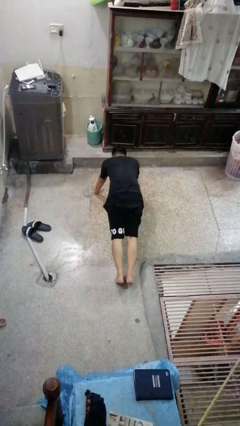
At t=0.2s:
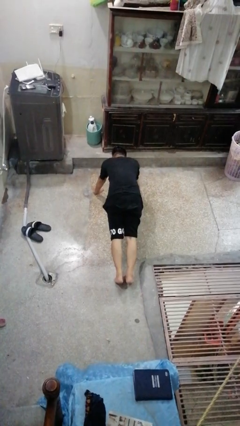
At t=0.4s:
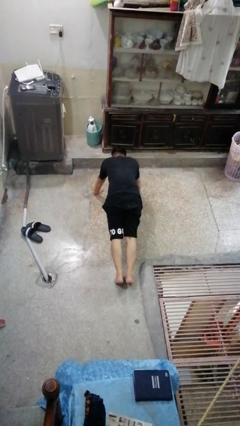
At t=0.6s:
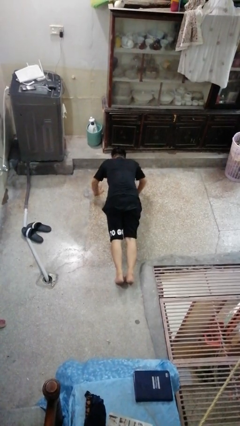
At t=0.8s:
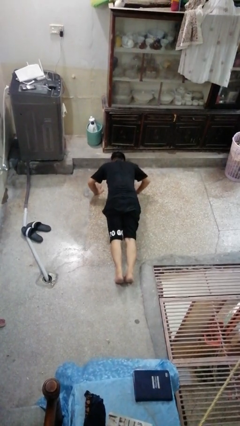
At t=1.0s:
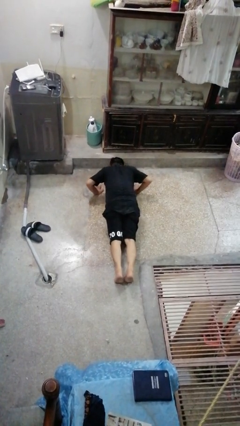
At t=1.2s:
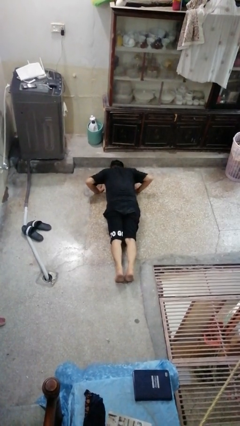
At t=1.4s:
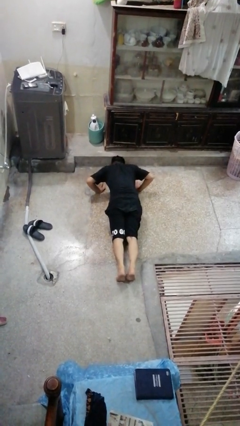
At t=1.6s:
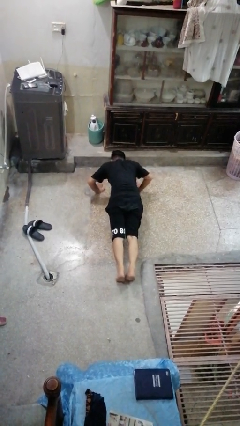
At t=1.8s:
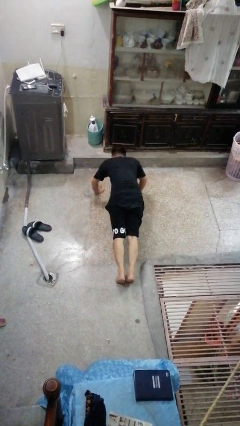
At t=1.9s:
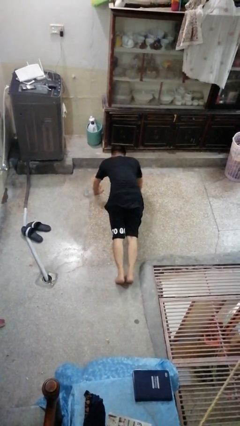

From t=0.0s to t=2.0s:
person exercises with pushup

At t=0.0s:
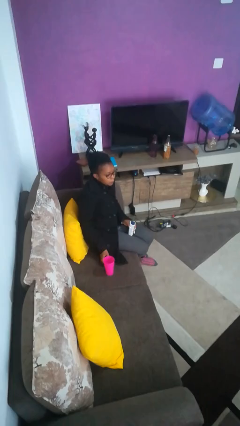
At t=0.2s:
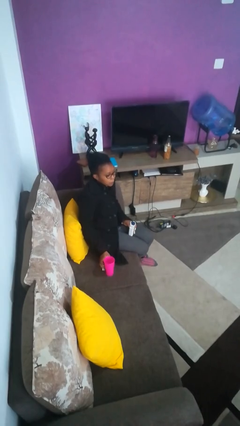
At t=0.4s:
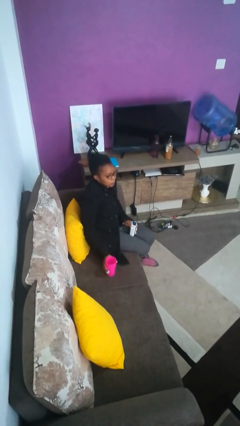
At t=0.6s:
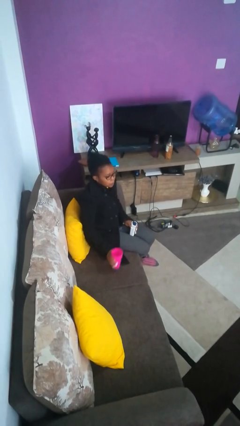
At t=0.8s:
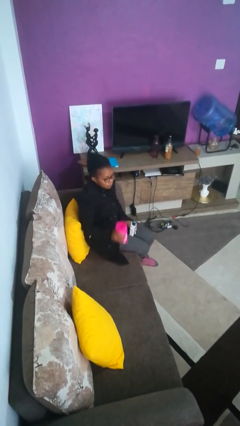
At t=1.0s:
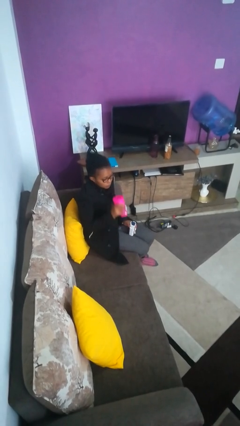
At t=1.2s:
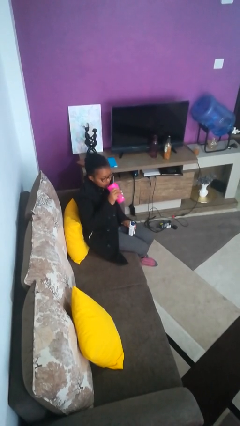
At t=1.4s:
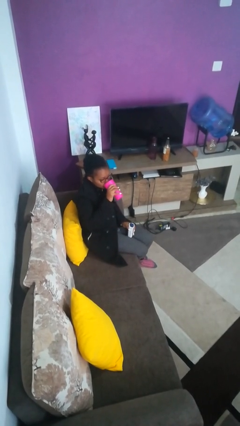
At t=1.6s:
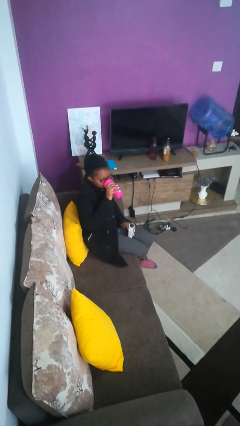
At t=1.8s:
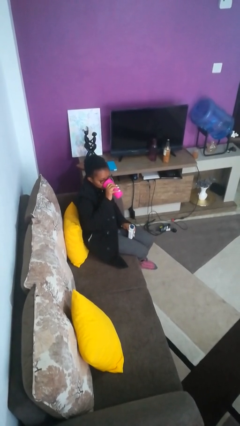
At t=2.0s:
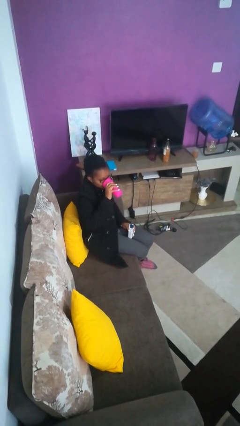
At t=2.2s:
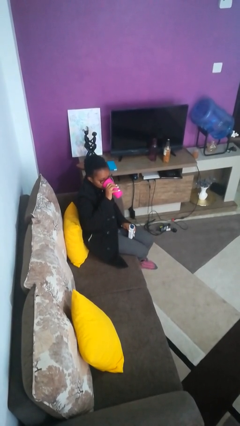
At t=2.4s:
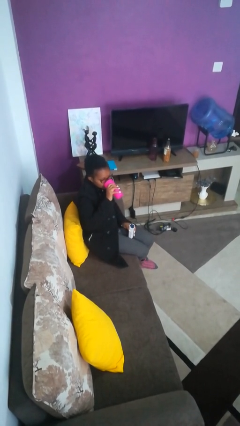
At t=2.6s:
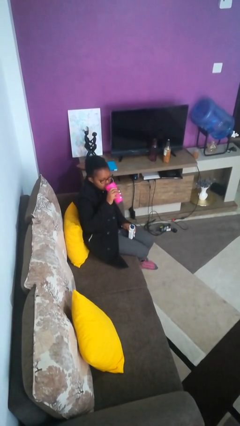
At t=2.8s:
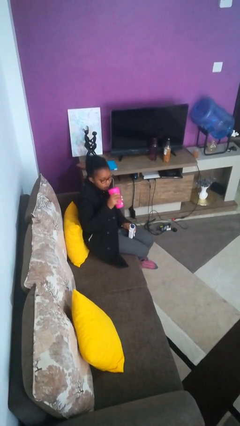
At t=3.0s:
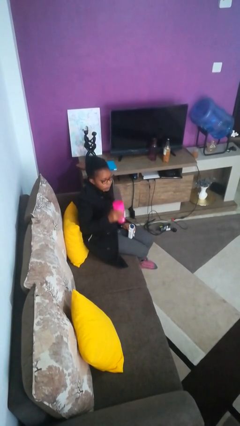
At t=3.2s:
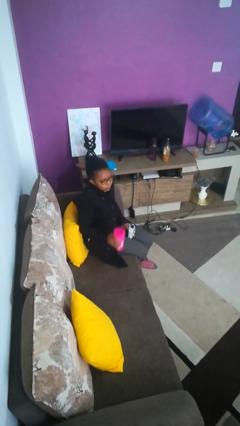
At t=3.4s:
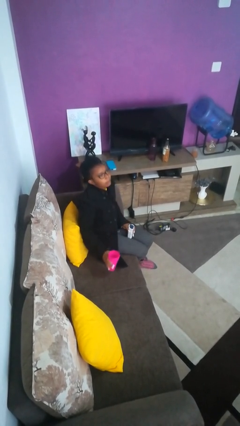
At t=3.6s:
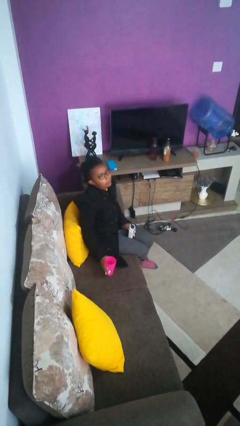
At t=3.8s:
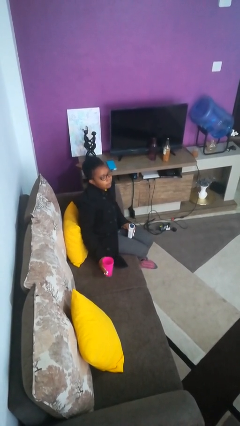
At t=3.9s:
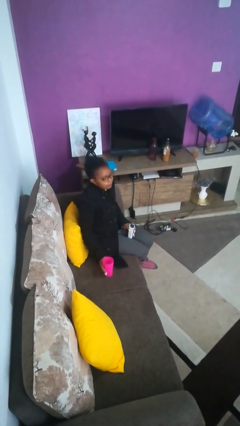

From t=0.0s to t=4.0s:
person drinks from cup

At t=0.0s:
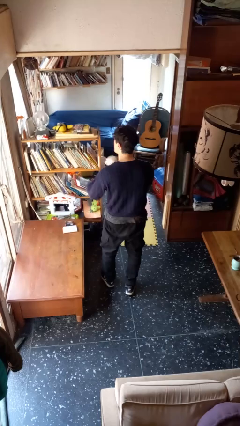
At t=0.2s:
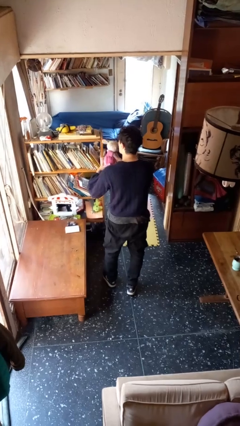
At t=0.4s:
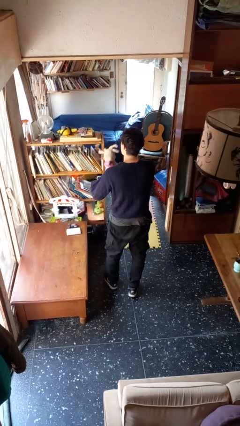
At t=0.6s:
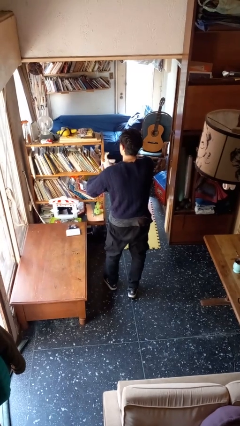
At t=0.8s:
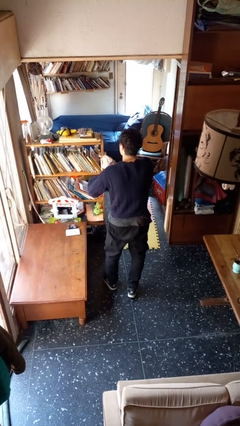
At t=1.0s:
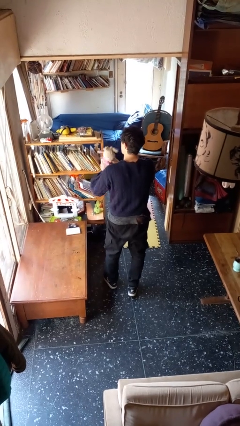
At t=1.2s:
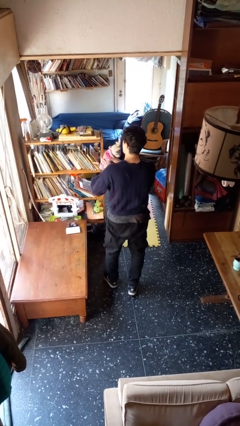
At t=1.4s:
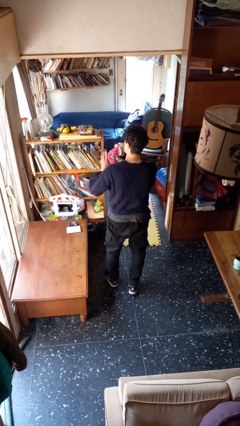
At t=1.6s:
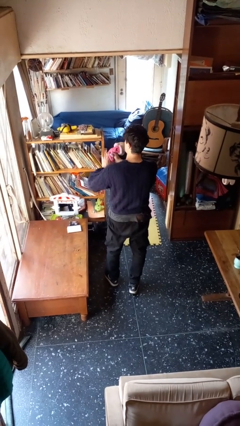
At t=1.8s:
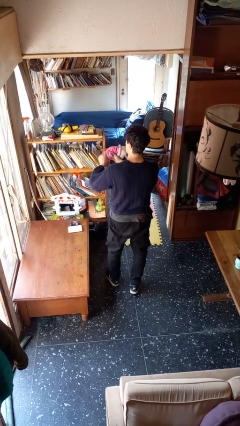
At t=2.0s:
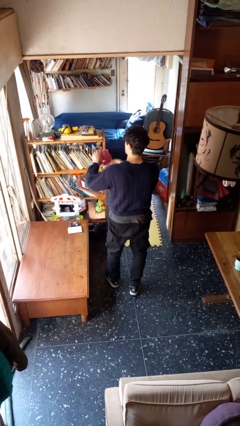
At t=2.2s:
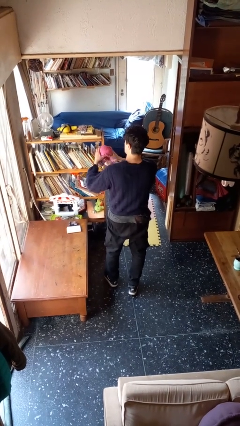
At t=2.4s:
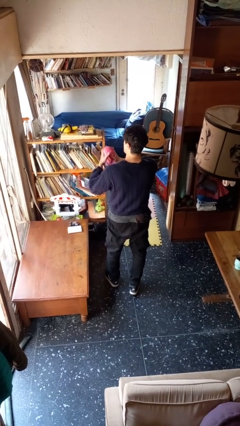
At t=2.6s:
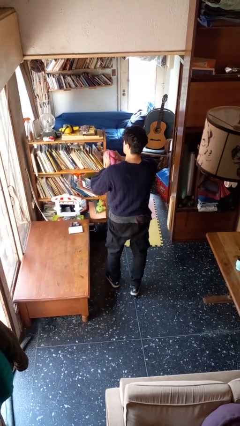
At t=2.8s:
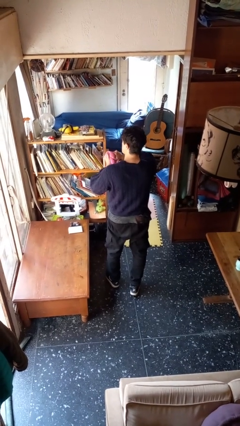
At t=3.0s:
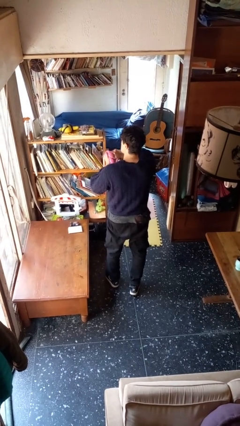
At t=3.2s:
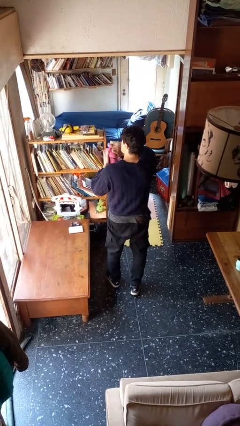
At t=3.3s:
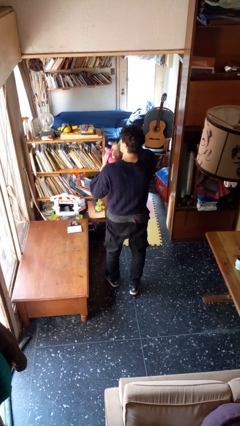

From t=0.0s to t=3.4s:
person squeezes object

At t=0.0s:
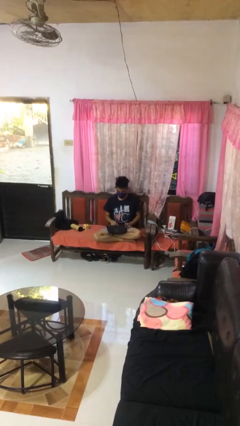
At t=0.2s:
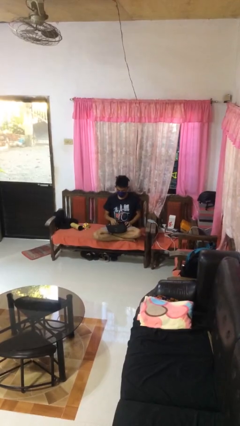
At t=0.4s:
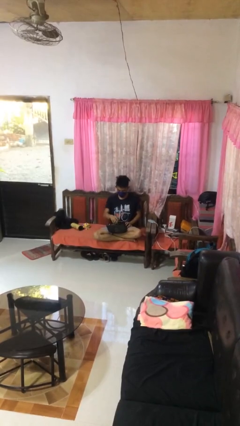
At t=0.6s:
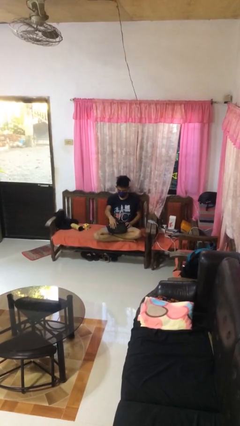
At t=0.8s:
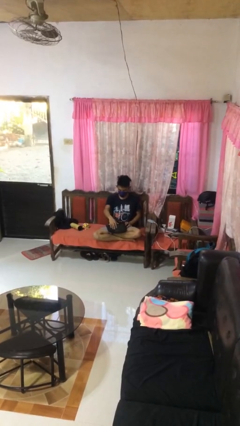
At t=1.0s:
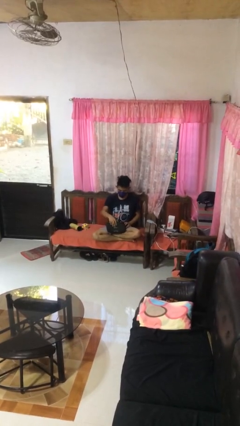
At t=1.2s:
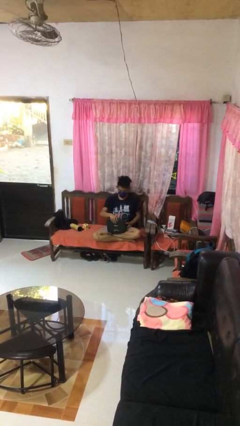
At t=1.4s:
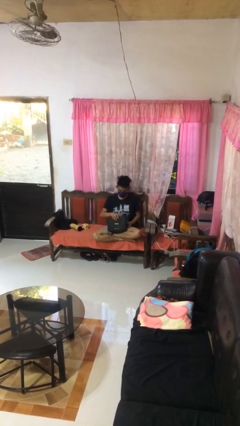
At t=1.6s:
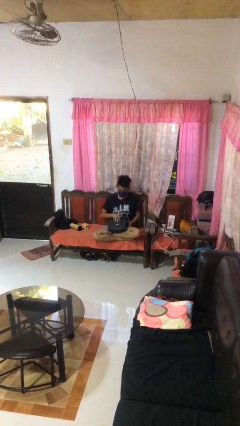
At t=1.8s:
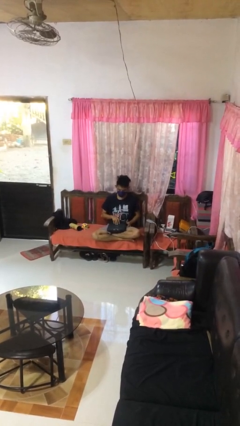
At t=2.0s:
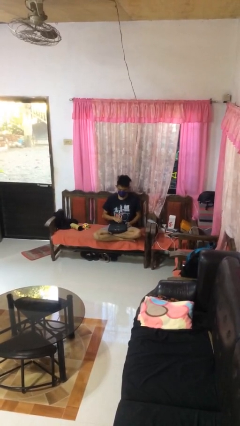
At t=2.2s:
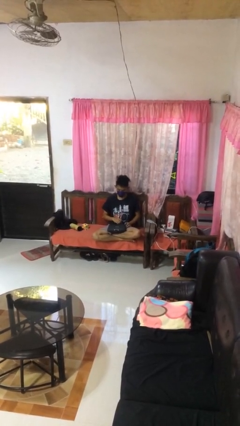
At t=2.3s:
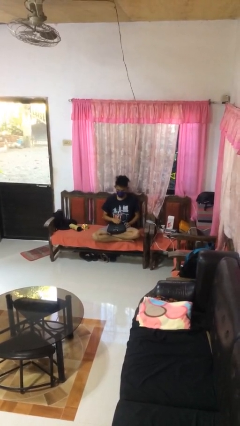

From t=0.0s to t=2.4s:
person closes laptop

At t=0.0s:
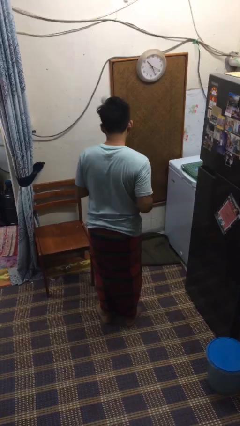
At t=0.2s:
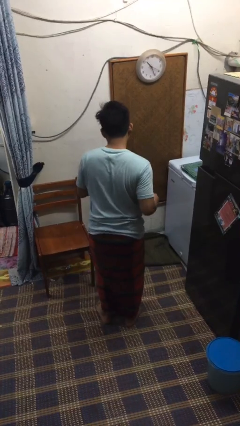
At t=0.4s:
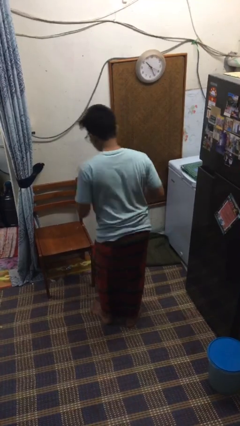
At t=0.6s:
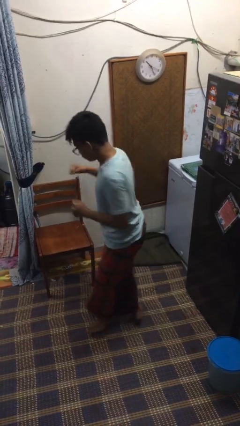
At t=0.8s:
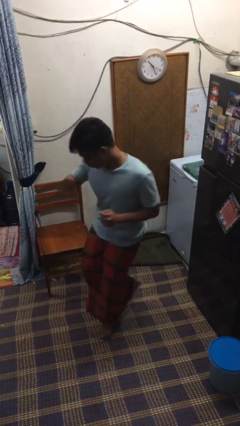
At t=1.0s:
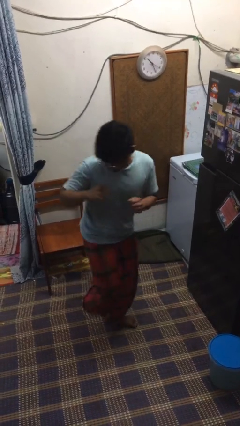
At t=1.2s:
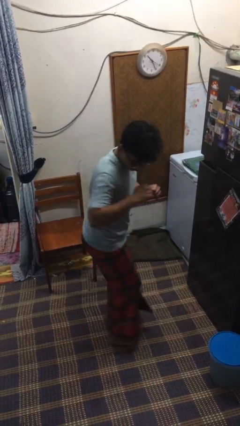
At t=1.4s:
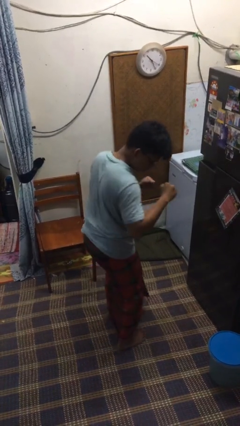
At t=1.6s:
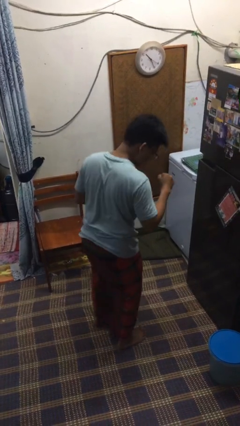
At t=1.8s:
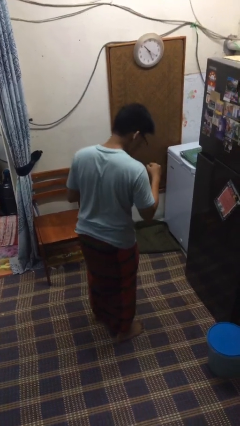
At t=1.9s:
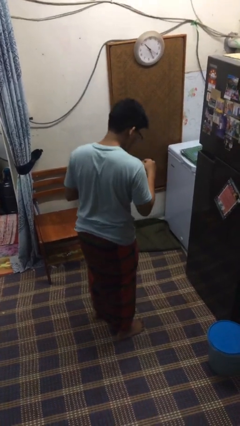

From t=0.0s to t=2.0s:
person twirls

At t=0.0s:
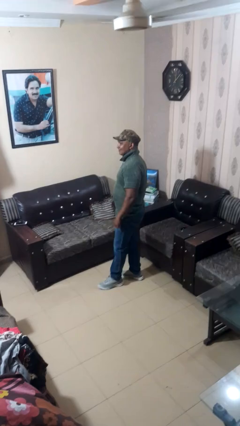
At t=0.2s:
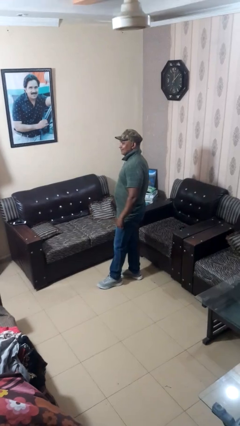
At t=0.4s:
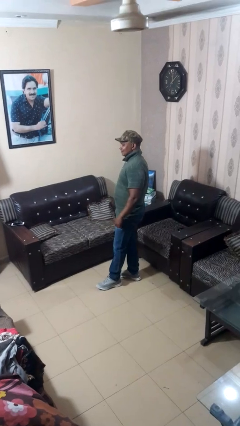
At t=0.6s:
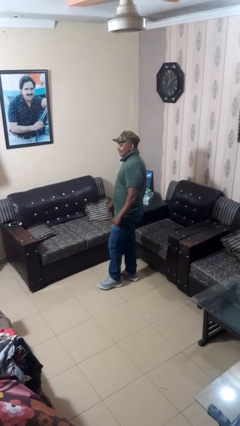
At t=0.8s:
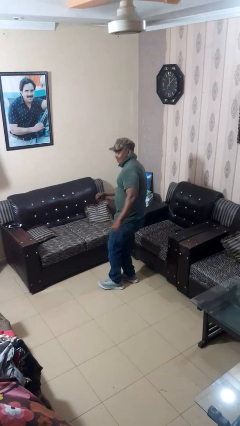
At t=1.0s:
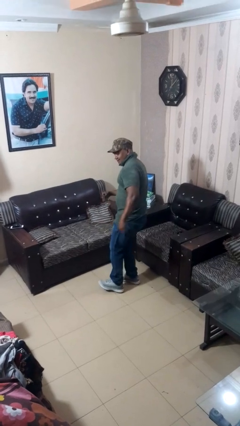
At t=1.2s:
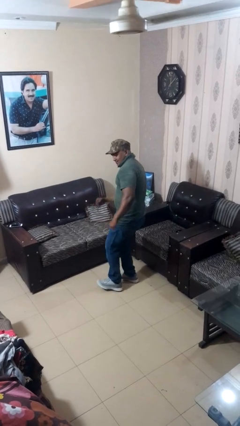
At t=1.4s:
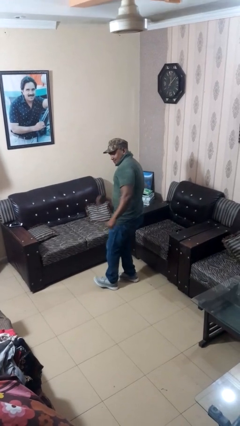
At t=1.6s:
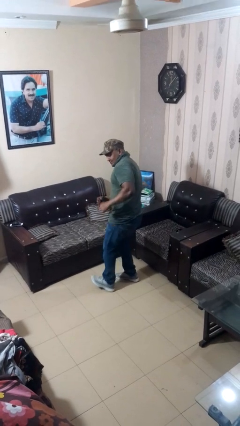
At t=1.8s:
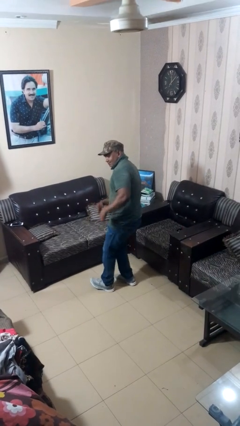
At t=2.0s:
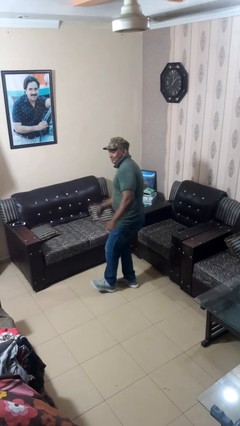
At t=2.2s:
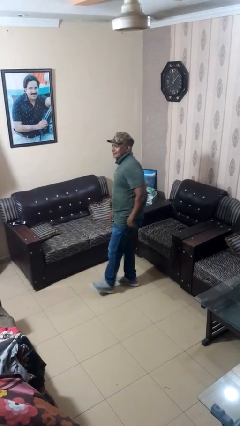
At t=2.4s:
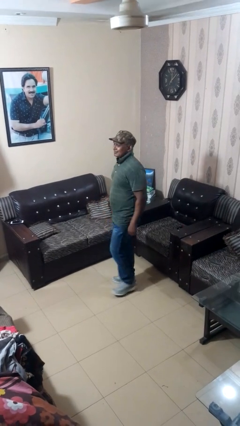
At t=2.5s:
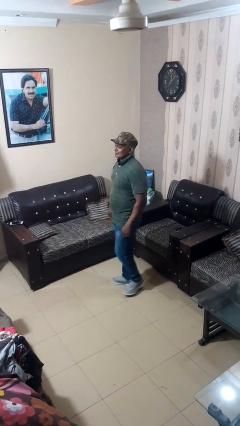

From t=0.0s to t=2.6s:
person dances in place

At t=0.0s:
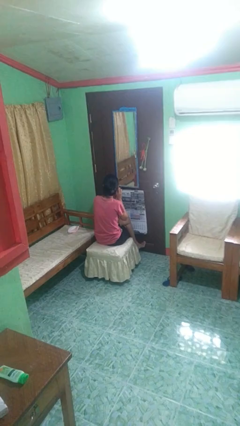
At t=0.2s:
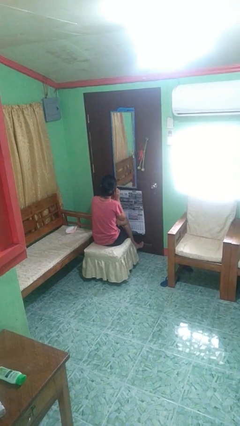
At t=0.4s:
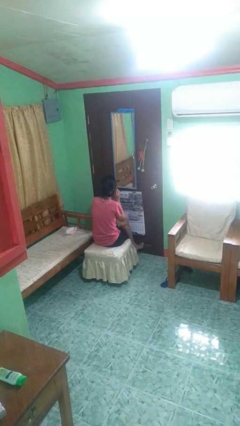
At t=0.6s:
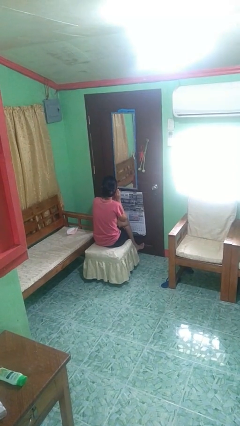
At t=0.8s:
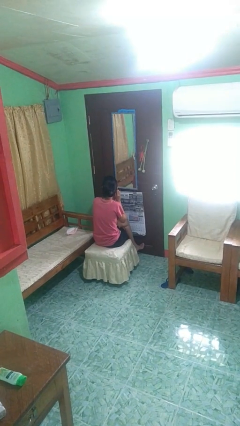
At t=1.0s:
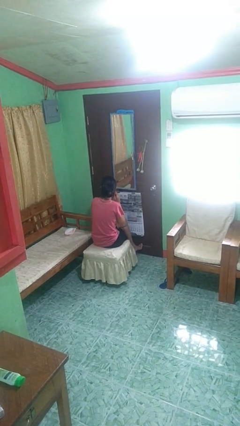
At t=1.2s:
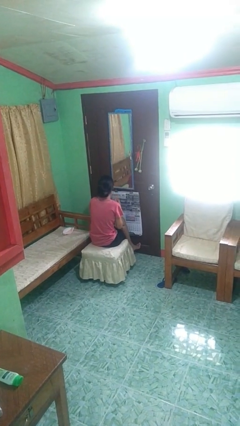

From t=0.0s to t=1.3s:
person takes off earrings
